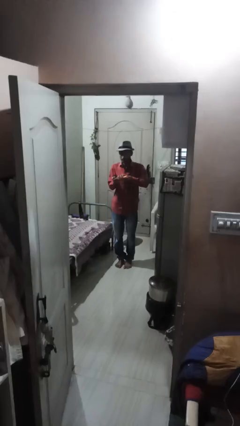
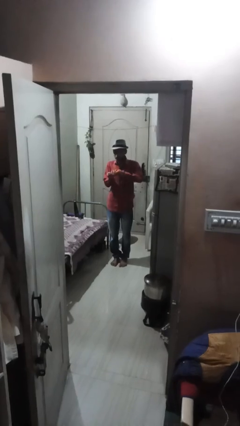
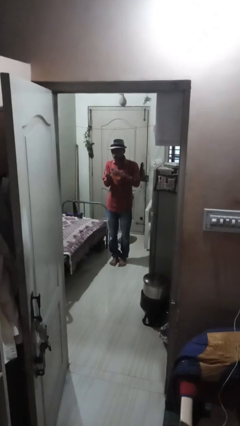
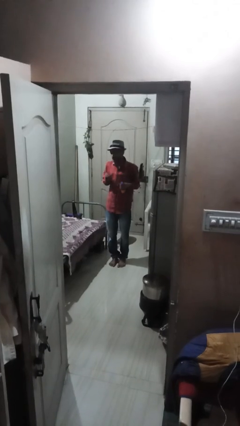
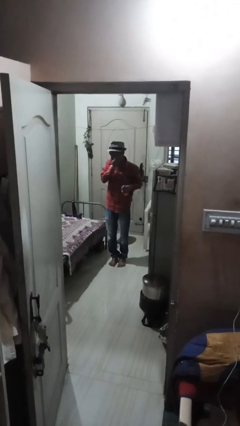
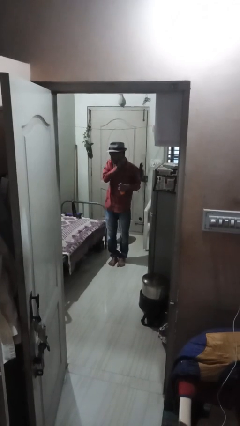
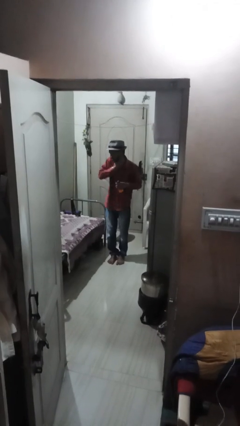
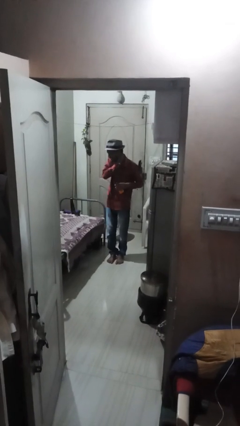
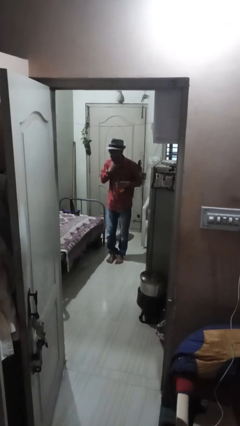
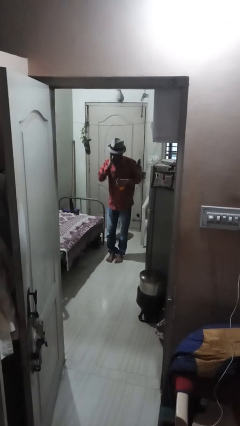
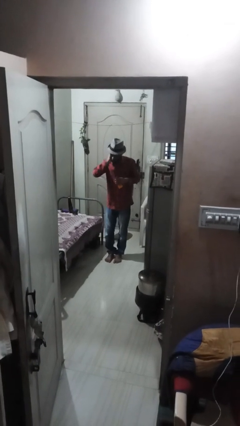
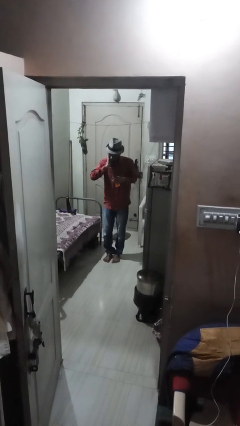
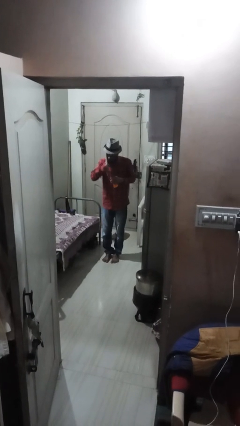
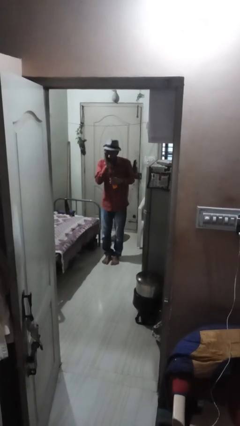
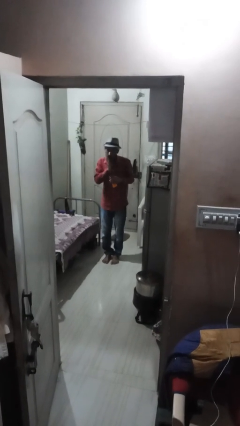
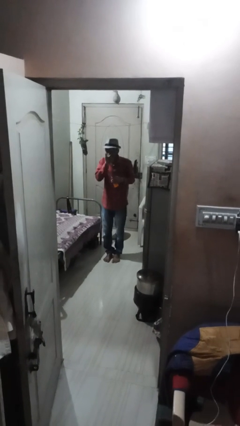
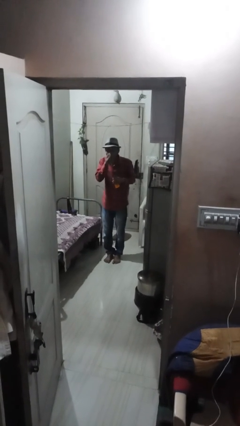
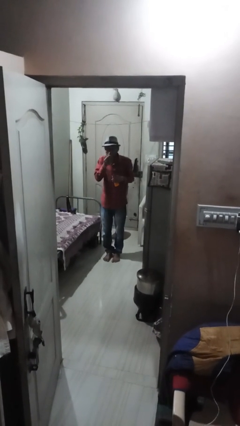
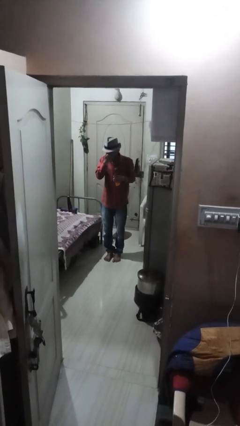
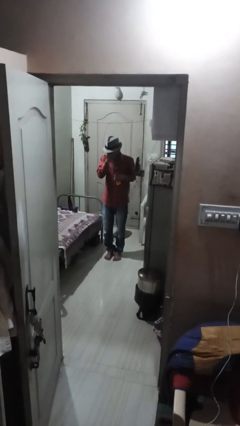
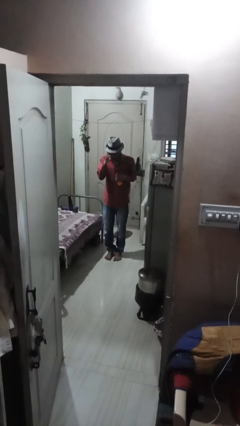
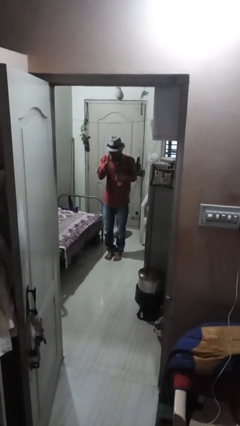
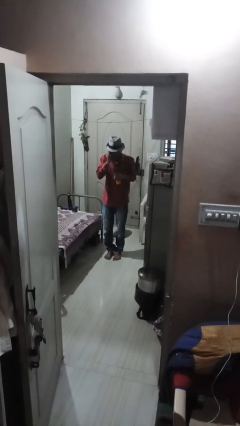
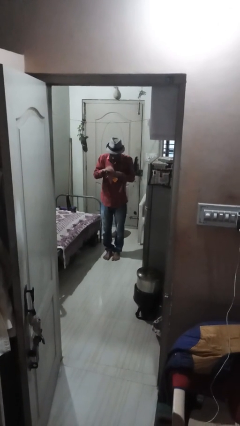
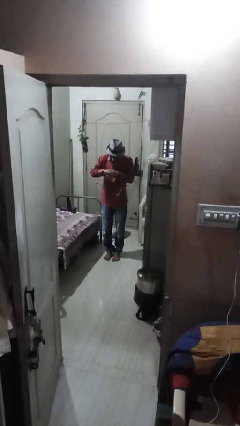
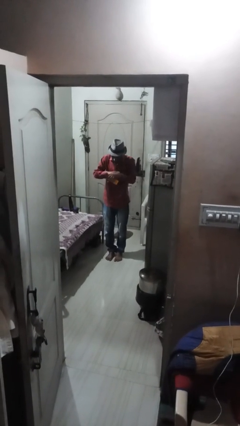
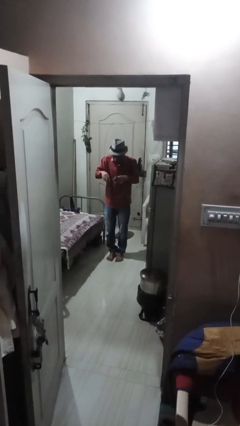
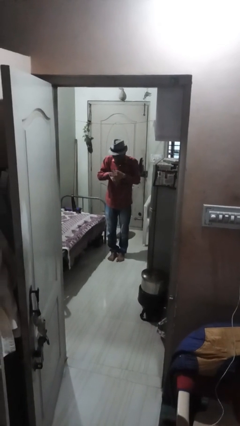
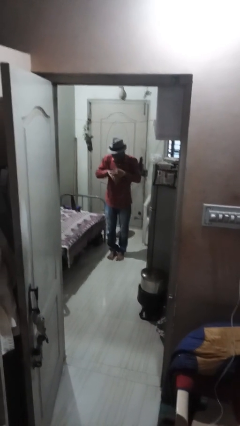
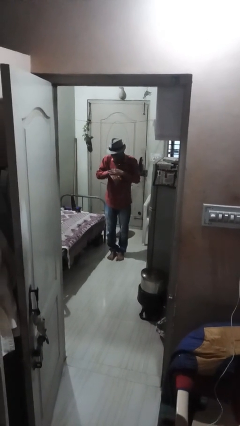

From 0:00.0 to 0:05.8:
person applies sunscreen

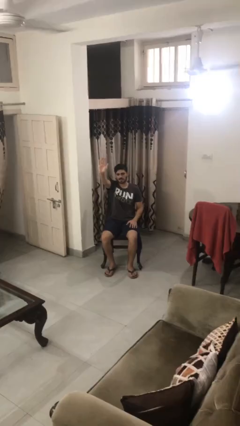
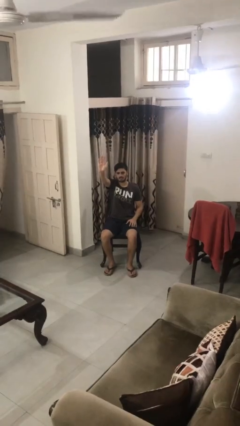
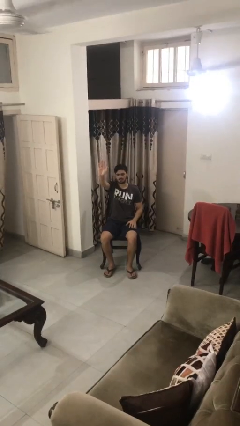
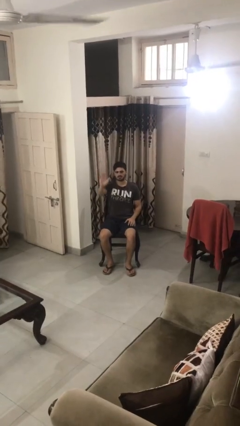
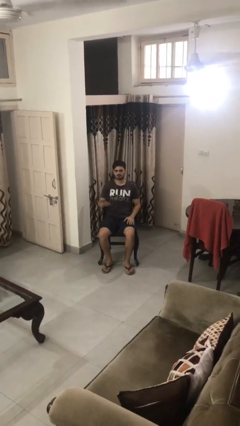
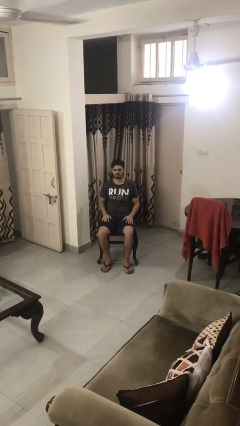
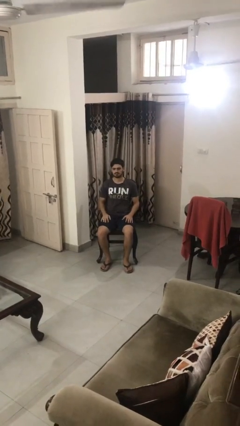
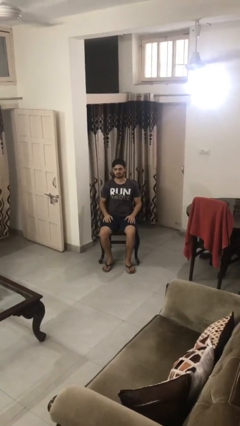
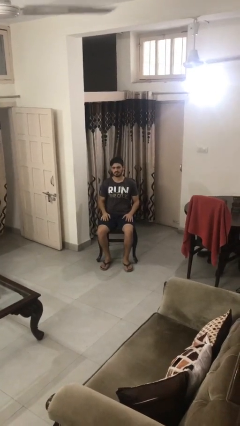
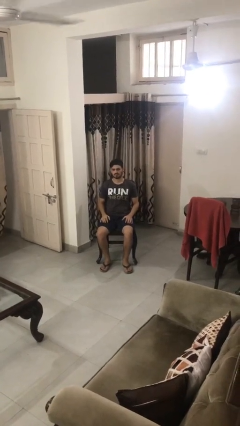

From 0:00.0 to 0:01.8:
person gestures lower hand

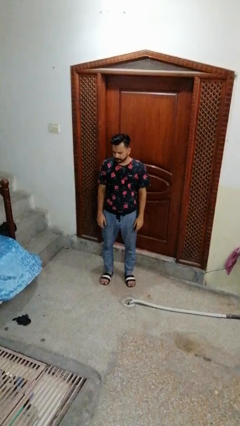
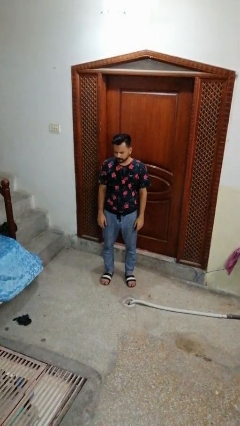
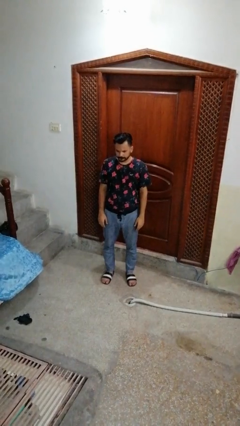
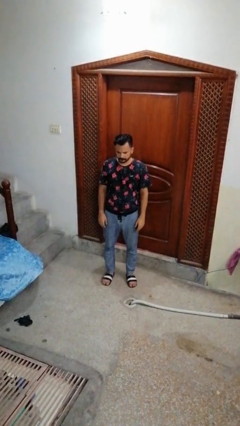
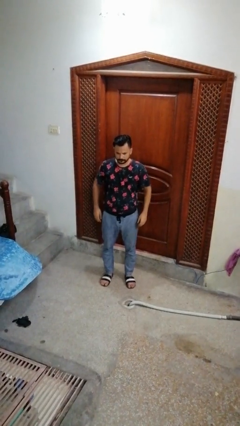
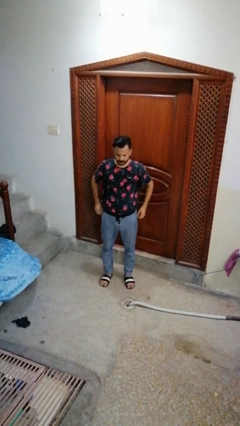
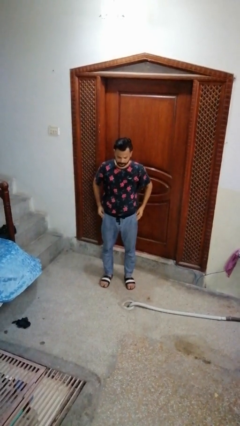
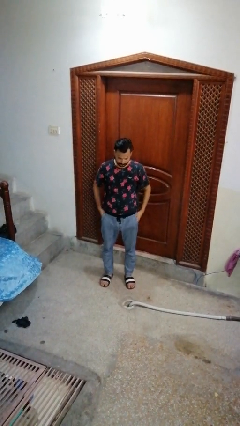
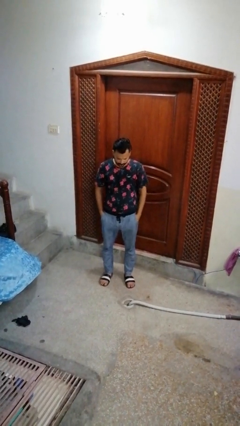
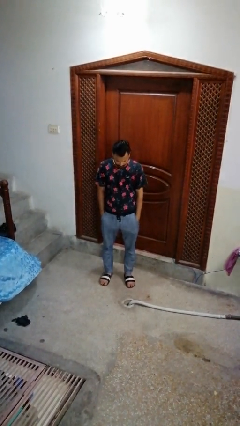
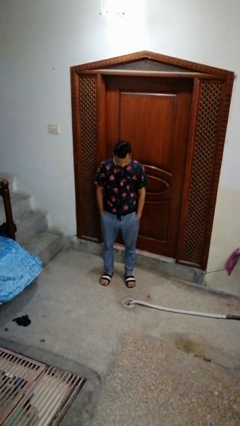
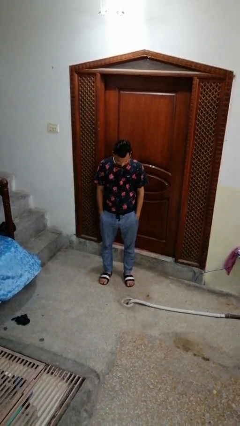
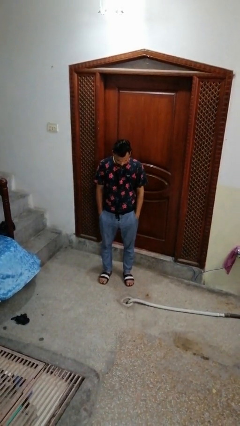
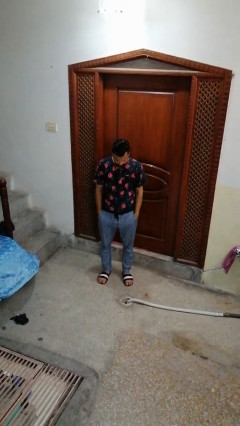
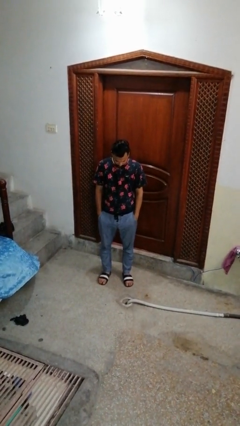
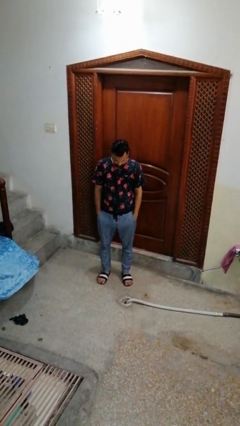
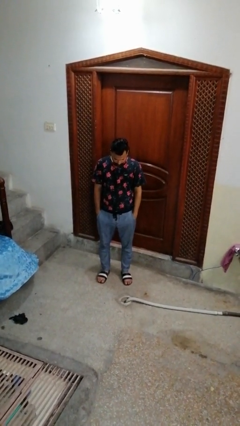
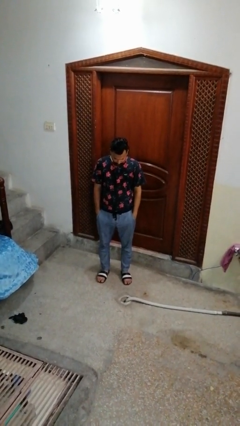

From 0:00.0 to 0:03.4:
person puts hands in back pockets

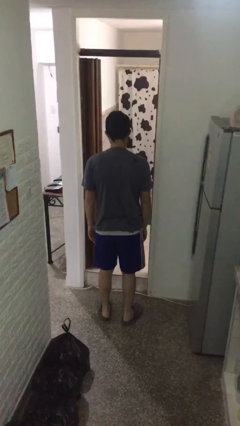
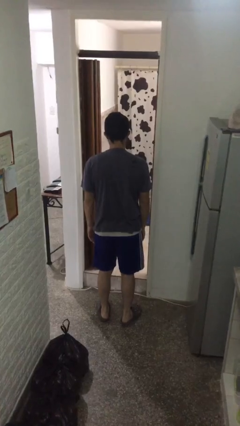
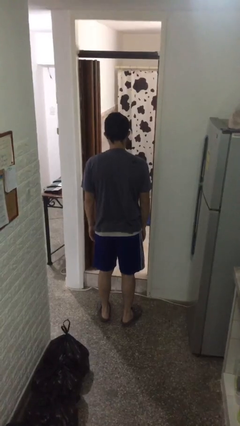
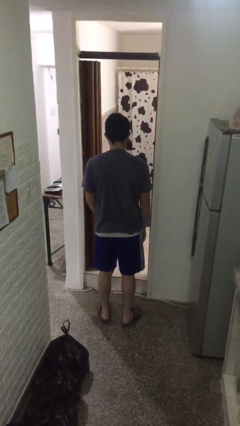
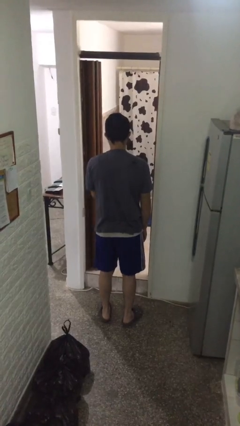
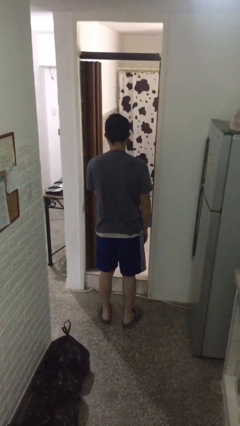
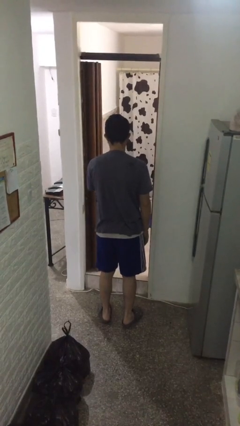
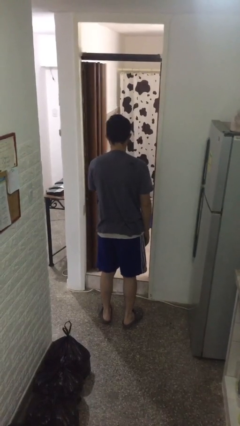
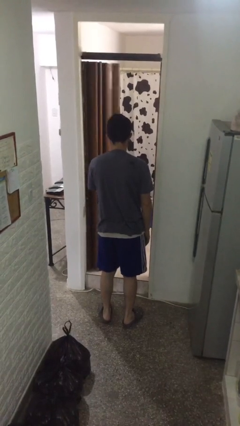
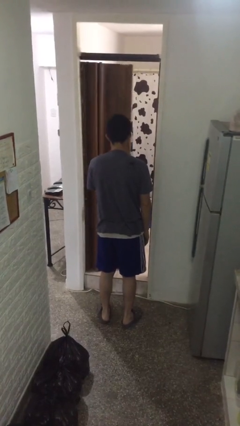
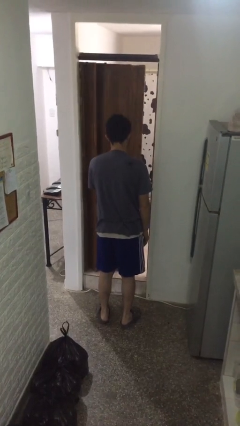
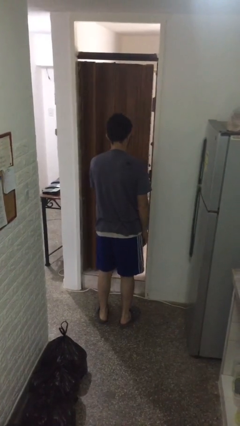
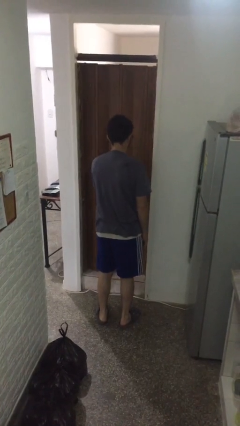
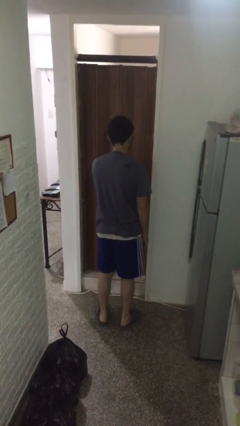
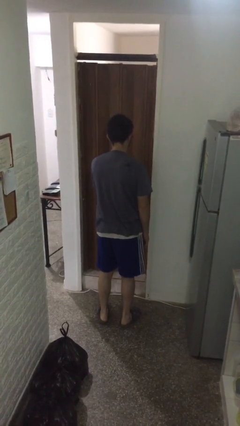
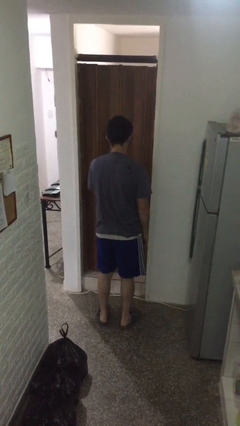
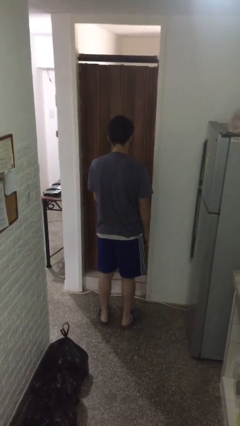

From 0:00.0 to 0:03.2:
person closes sliding door

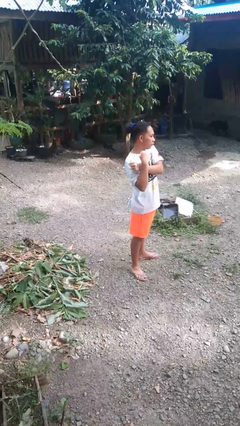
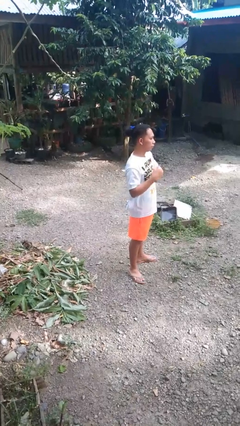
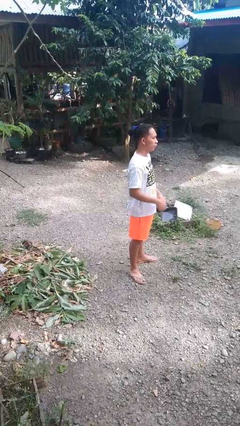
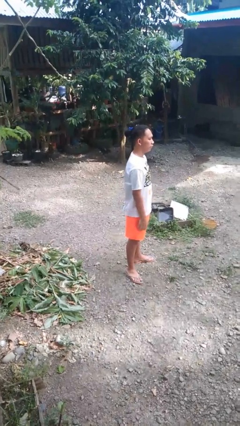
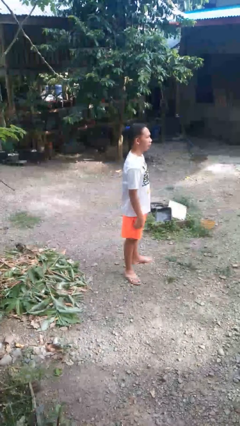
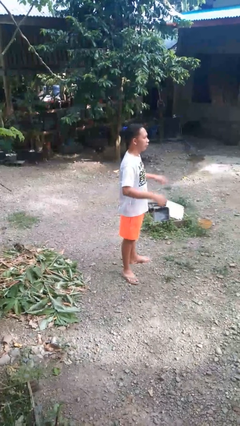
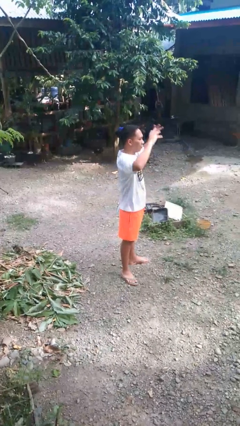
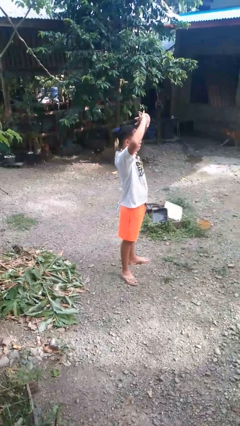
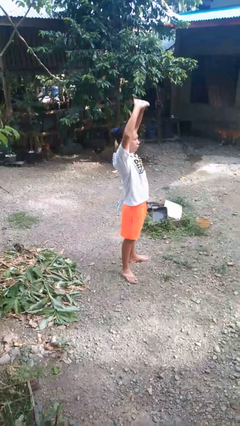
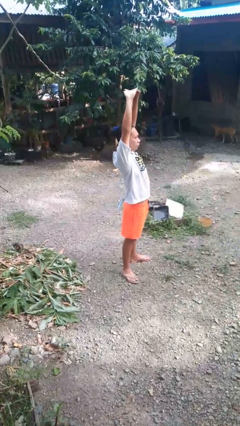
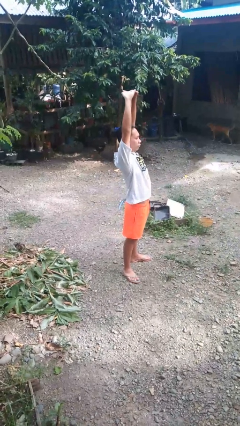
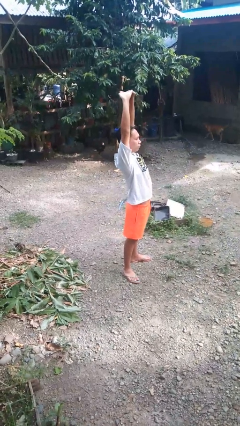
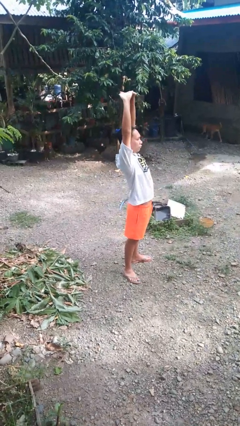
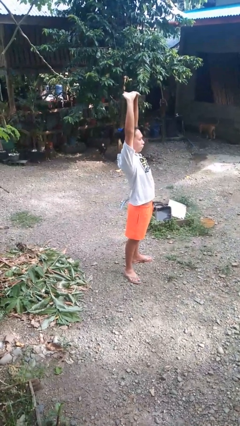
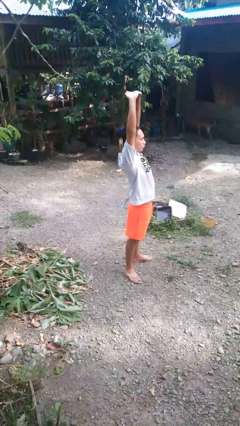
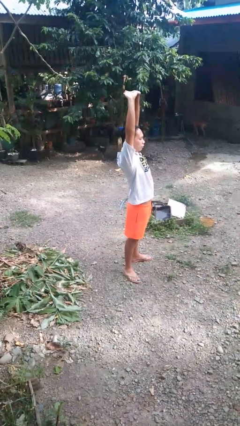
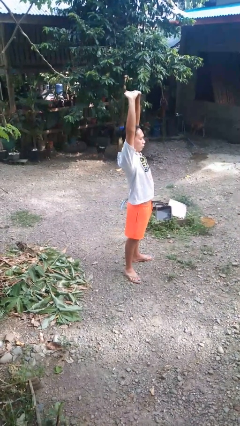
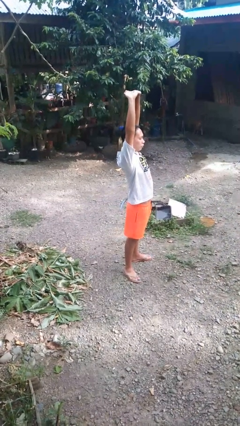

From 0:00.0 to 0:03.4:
person stretches arms over head
